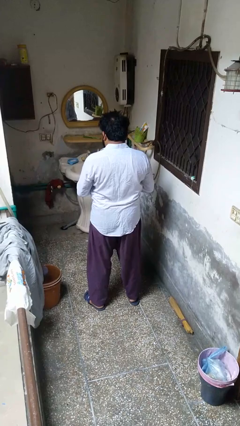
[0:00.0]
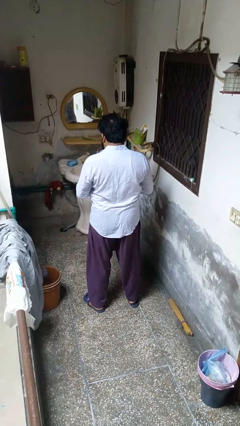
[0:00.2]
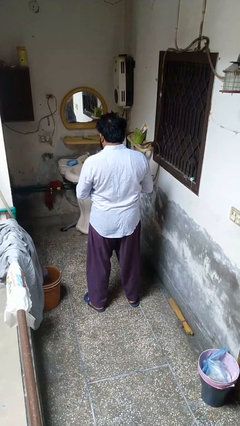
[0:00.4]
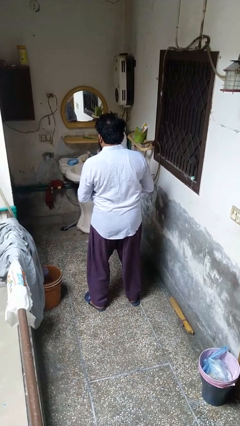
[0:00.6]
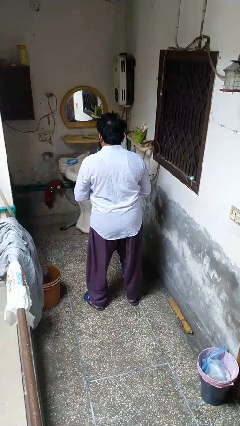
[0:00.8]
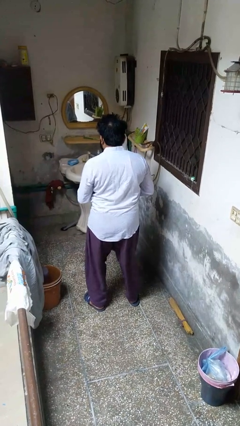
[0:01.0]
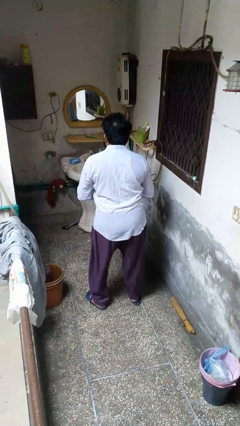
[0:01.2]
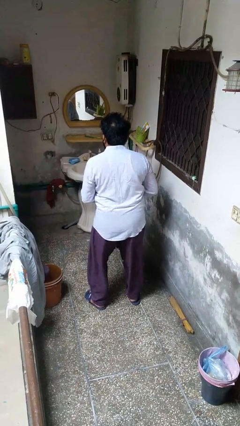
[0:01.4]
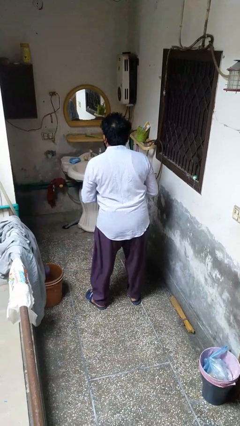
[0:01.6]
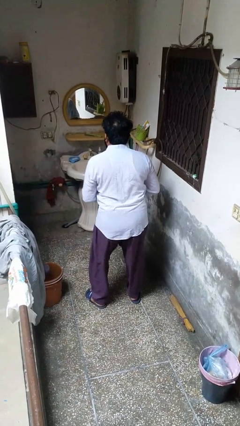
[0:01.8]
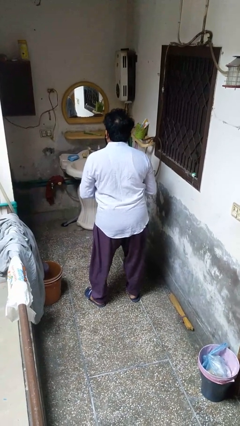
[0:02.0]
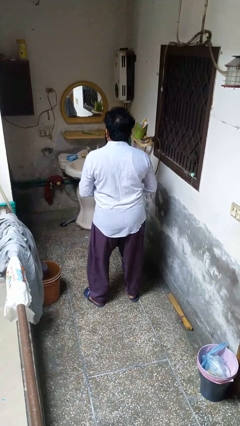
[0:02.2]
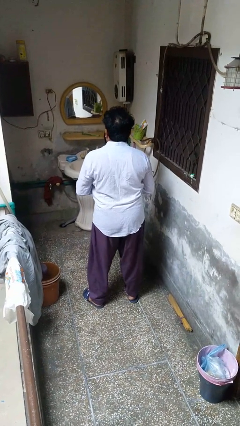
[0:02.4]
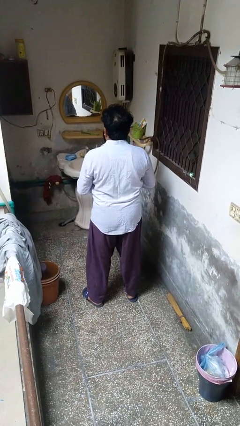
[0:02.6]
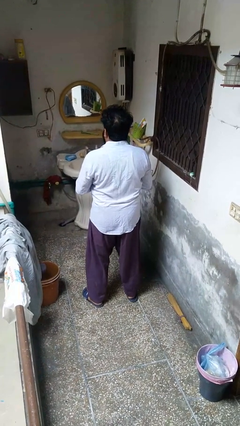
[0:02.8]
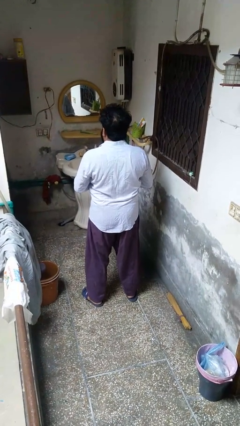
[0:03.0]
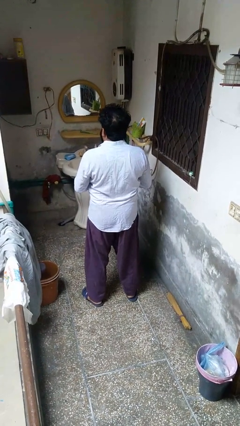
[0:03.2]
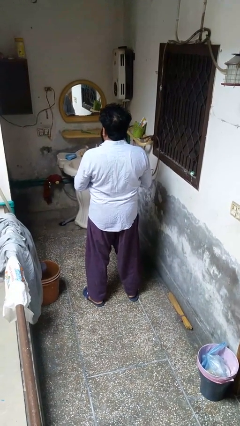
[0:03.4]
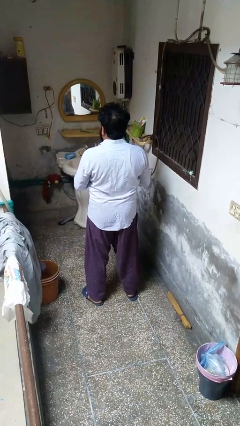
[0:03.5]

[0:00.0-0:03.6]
person wiggles hips

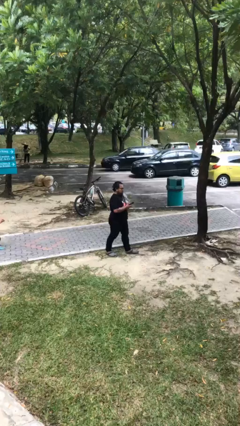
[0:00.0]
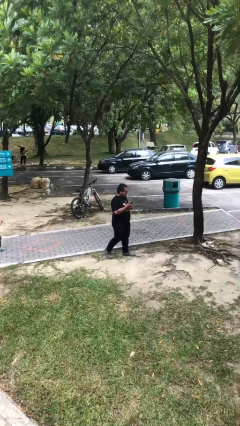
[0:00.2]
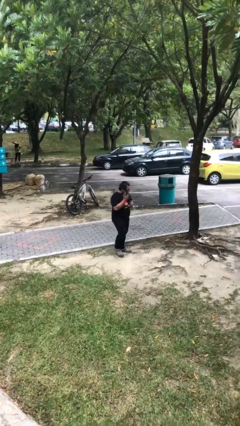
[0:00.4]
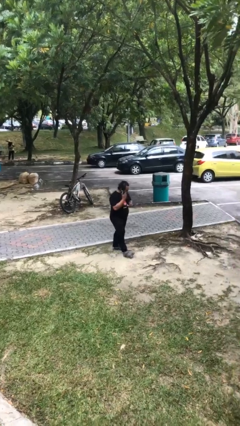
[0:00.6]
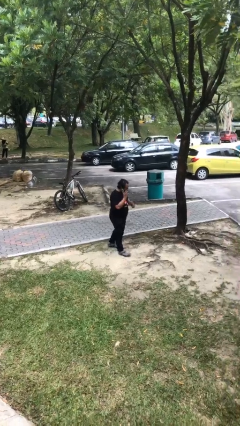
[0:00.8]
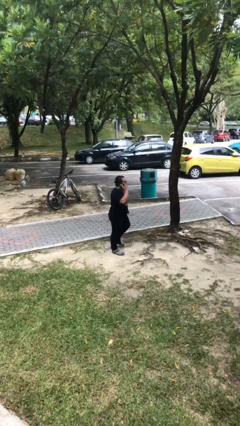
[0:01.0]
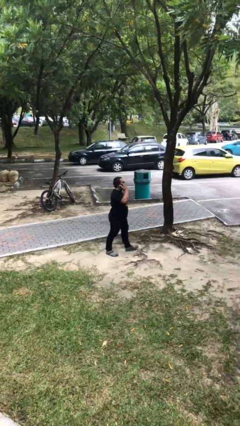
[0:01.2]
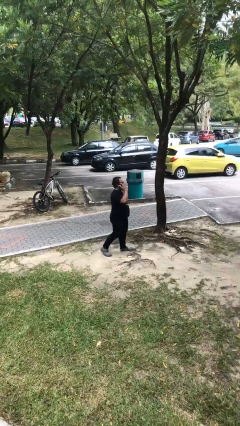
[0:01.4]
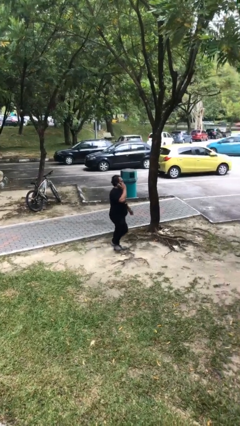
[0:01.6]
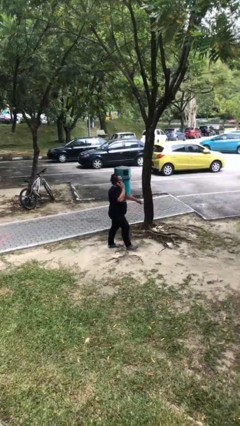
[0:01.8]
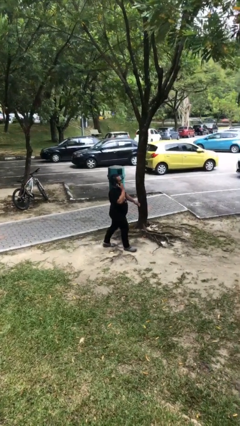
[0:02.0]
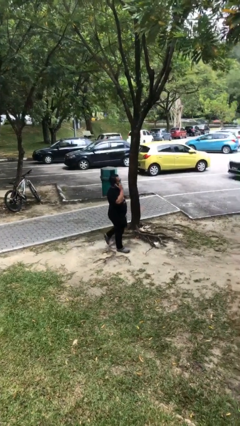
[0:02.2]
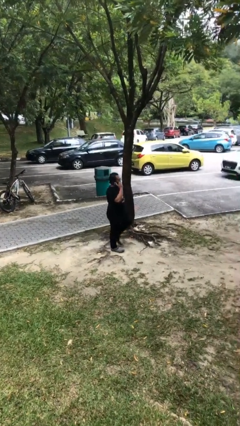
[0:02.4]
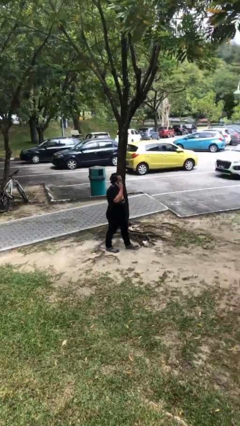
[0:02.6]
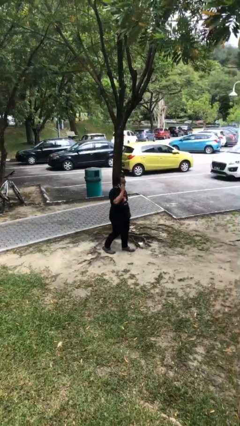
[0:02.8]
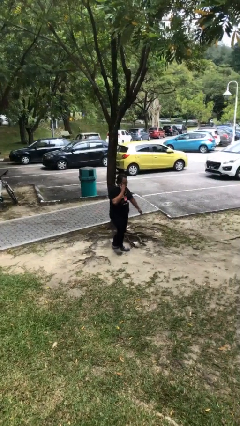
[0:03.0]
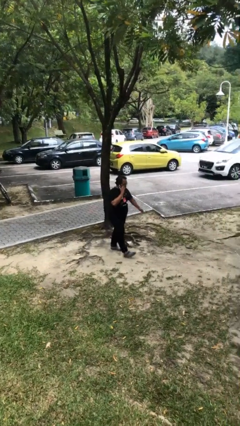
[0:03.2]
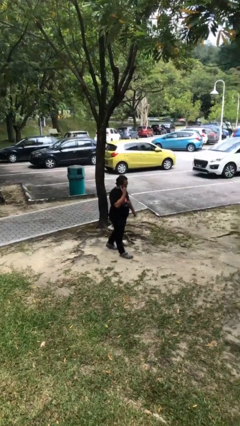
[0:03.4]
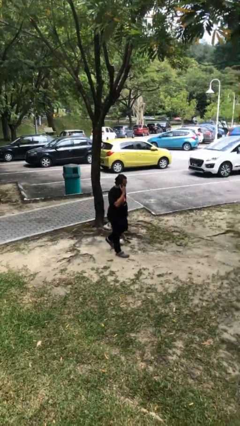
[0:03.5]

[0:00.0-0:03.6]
person talks on phone
